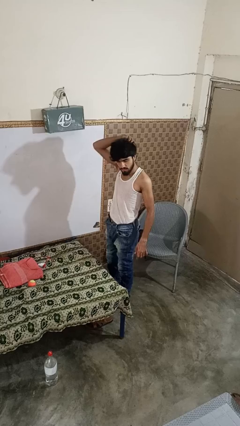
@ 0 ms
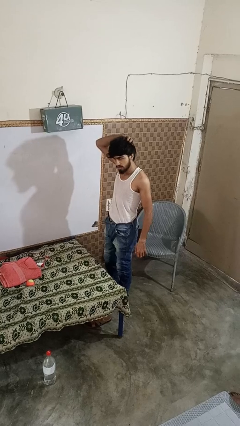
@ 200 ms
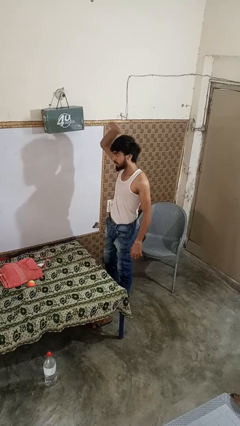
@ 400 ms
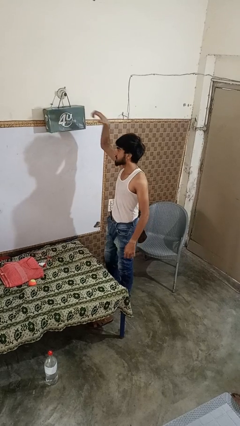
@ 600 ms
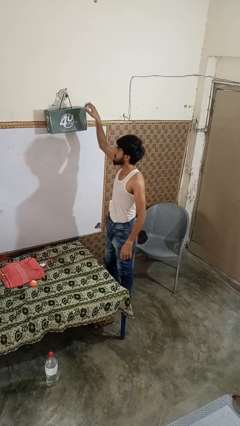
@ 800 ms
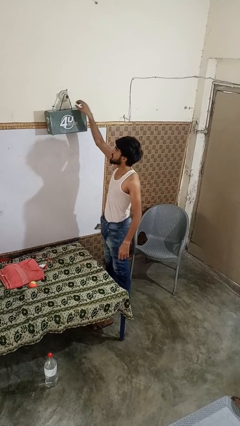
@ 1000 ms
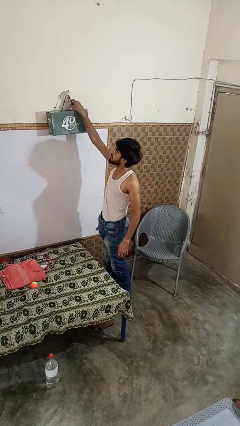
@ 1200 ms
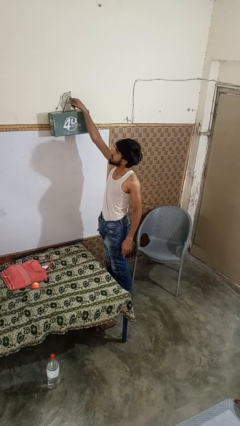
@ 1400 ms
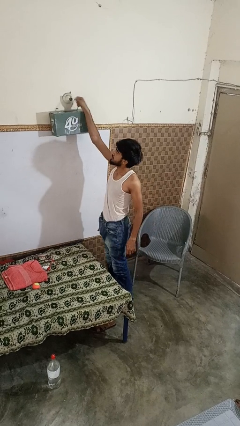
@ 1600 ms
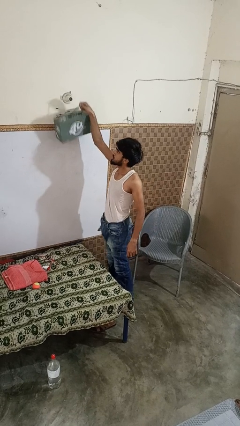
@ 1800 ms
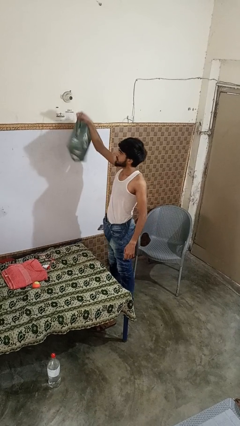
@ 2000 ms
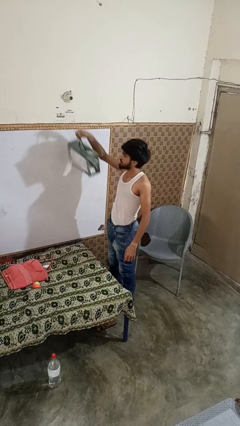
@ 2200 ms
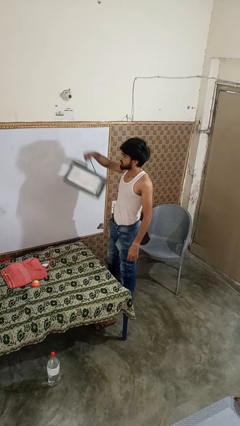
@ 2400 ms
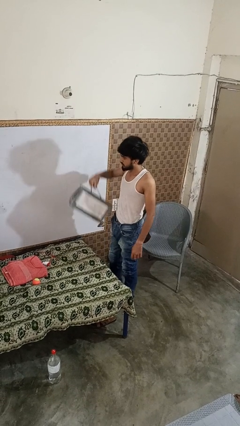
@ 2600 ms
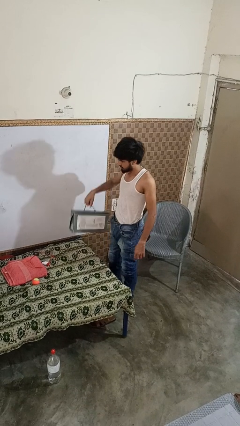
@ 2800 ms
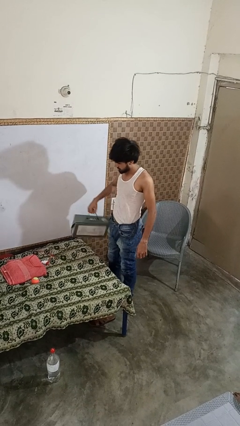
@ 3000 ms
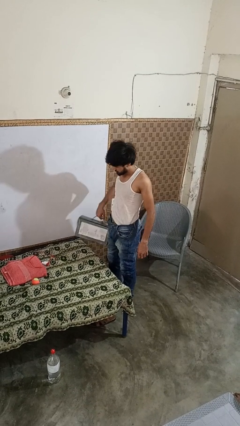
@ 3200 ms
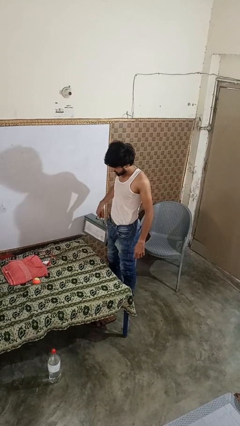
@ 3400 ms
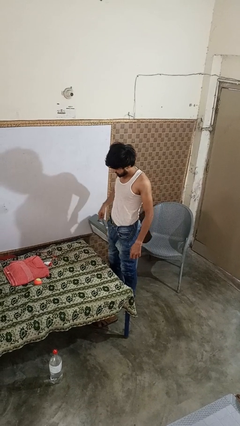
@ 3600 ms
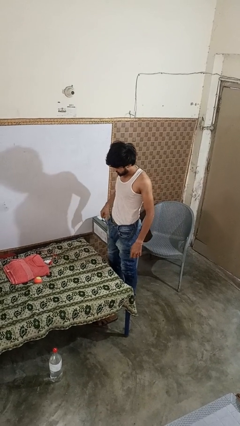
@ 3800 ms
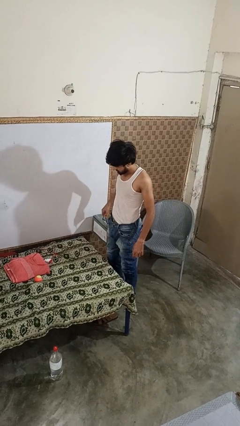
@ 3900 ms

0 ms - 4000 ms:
person takes down smoke detector

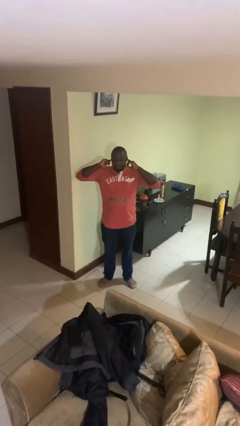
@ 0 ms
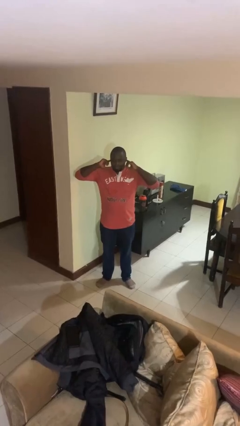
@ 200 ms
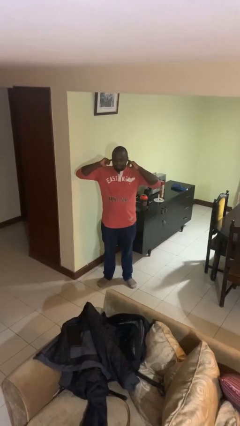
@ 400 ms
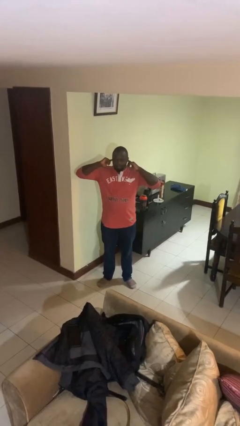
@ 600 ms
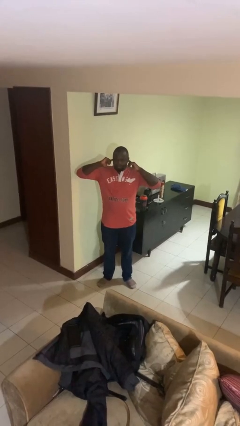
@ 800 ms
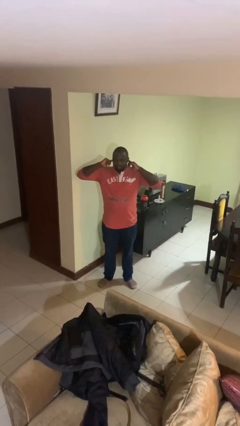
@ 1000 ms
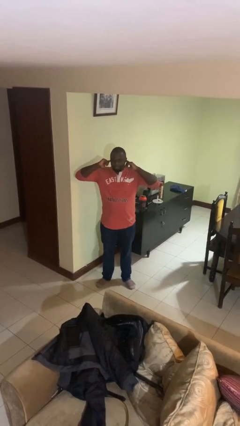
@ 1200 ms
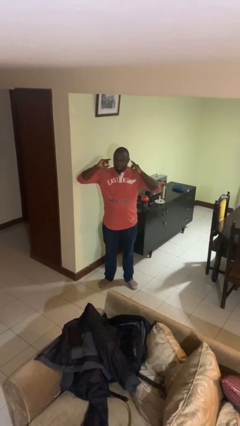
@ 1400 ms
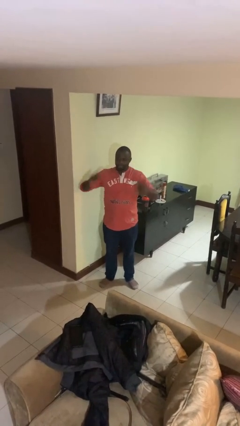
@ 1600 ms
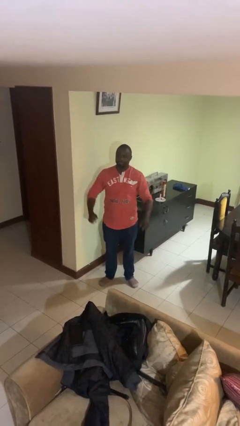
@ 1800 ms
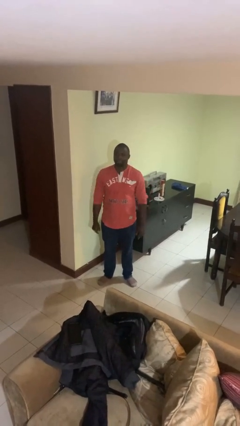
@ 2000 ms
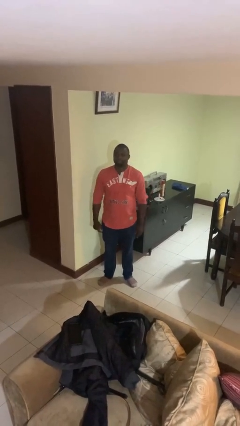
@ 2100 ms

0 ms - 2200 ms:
person puts fingers in ear

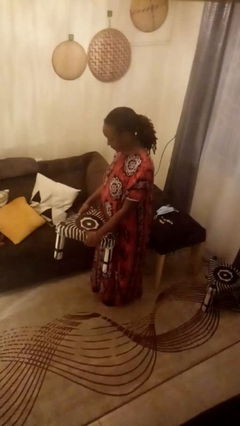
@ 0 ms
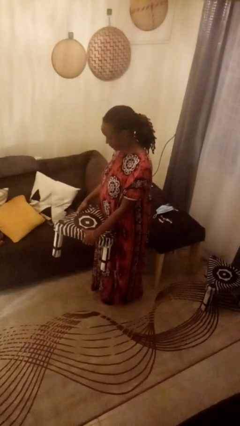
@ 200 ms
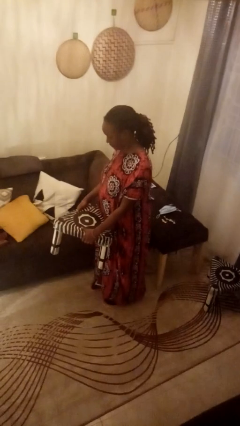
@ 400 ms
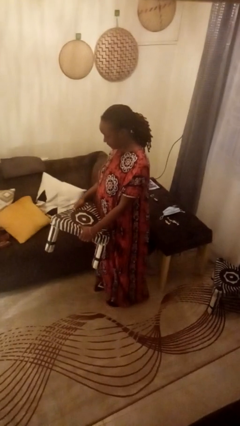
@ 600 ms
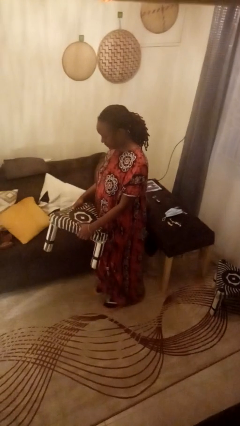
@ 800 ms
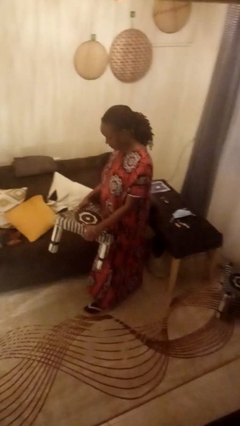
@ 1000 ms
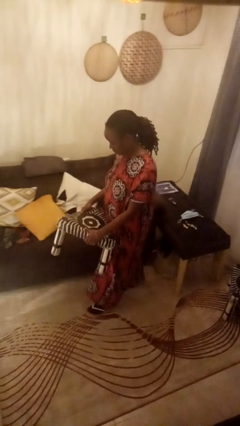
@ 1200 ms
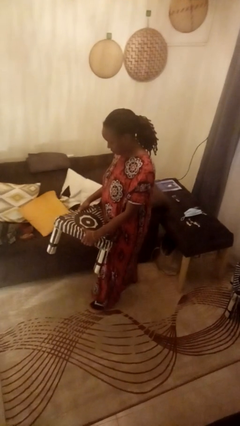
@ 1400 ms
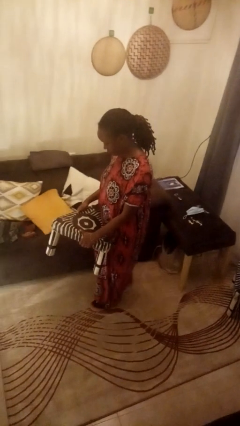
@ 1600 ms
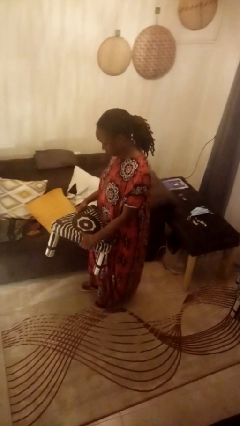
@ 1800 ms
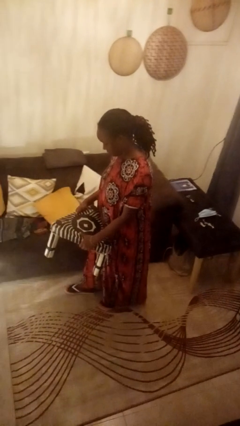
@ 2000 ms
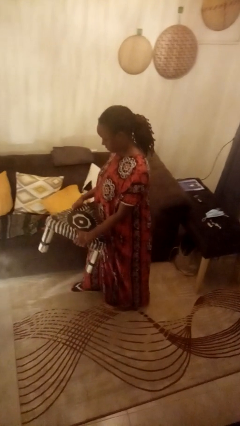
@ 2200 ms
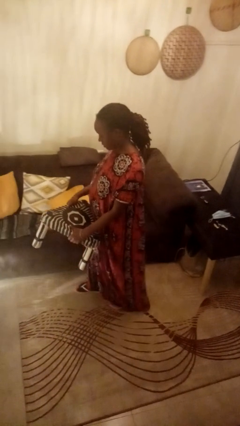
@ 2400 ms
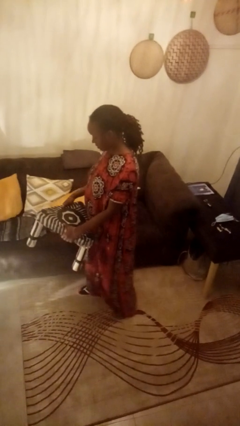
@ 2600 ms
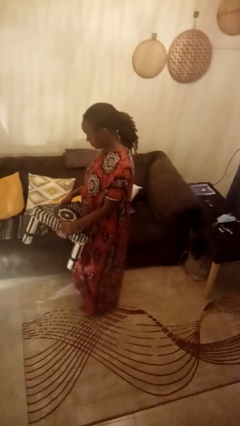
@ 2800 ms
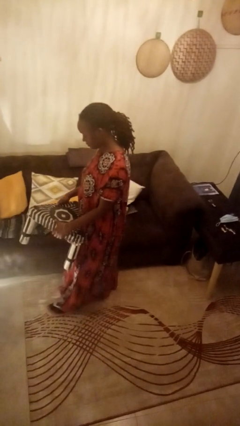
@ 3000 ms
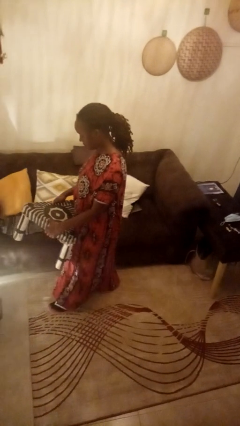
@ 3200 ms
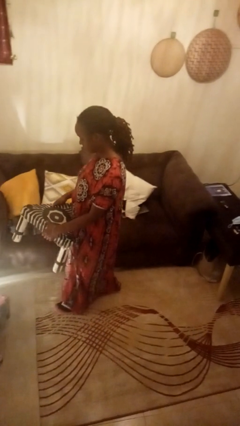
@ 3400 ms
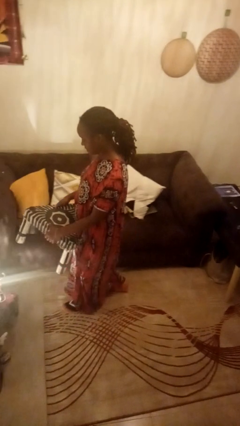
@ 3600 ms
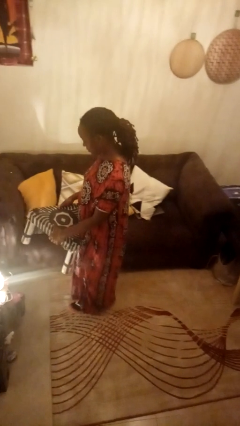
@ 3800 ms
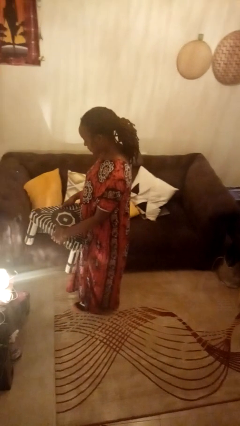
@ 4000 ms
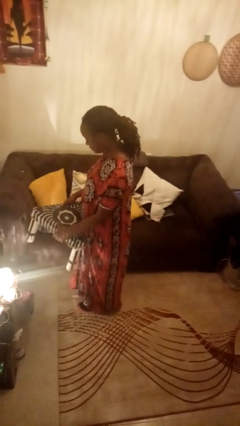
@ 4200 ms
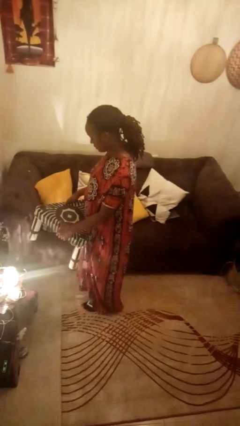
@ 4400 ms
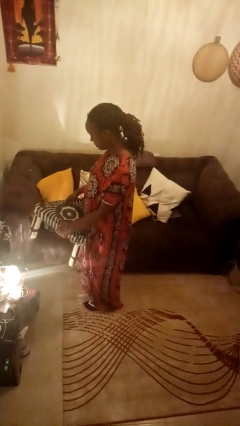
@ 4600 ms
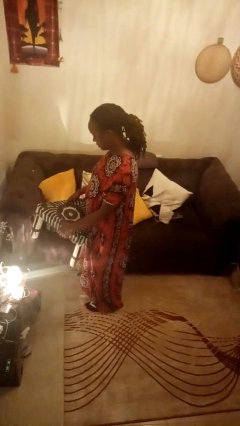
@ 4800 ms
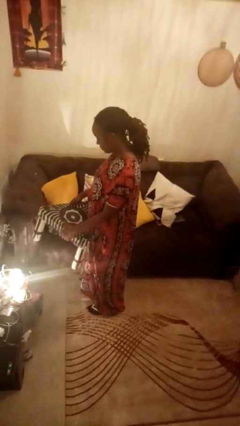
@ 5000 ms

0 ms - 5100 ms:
person carries furniture

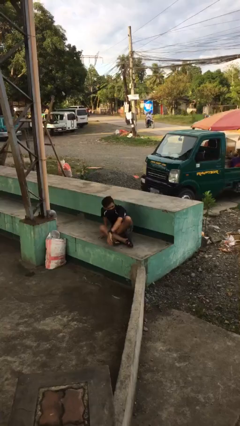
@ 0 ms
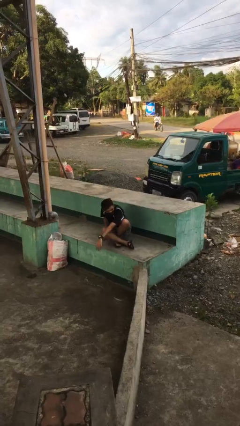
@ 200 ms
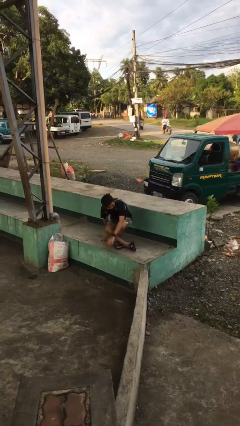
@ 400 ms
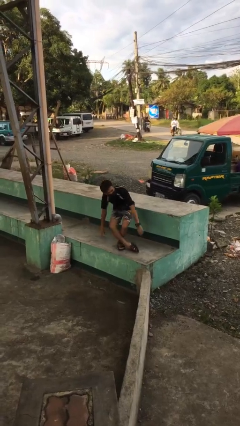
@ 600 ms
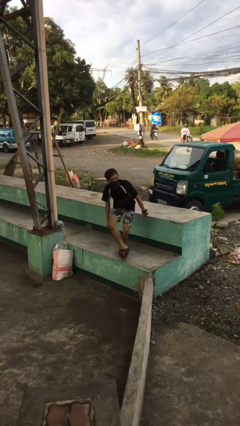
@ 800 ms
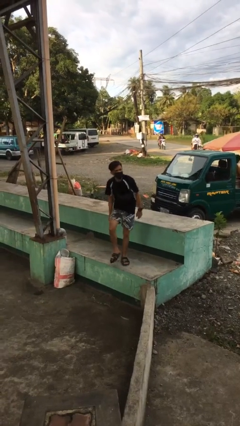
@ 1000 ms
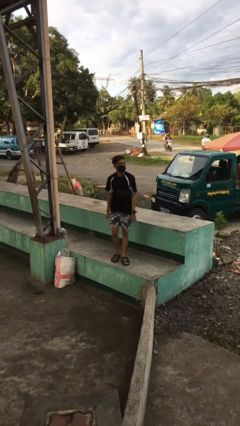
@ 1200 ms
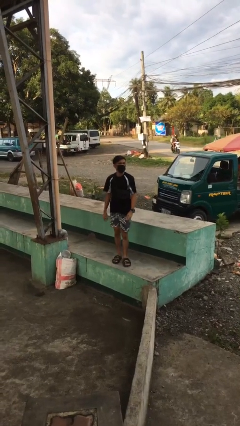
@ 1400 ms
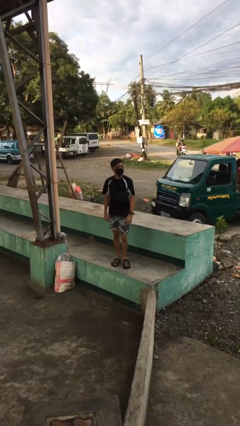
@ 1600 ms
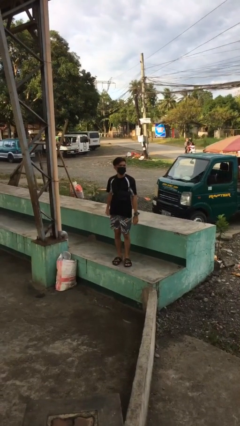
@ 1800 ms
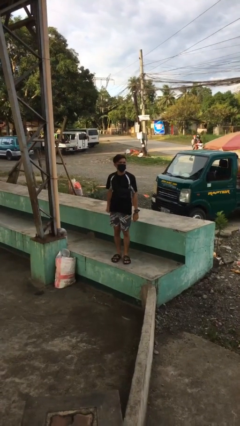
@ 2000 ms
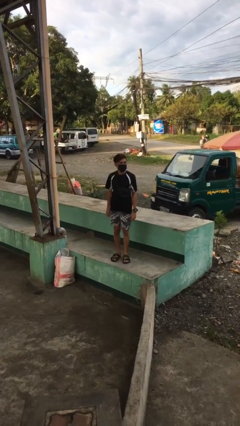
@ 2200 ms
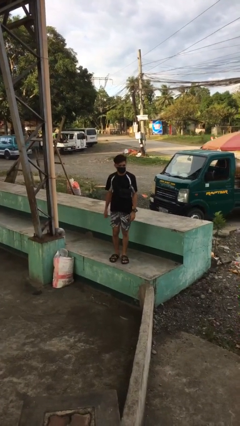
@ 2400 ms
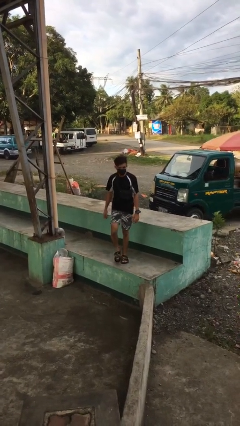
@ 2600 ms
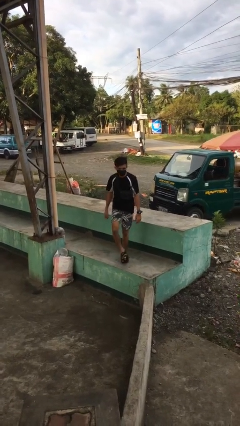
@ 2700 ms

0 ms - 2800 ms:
person stands up from floor

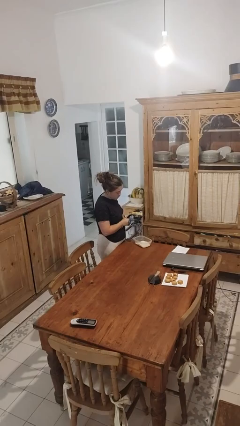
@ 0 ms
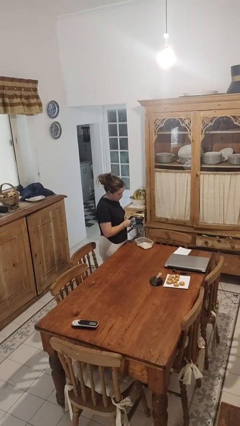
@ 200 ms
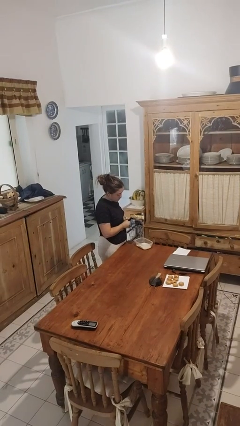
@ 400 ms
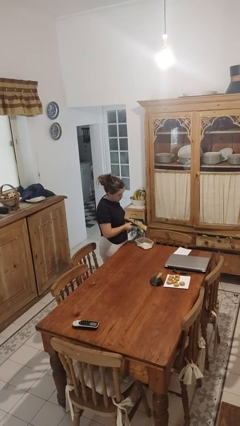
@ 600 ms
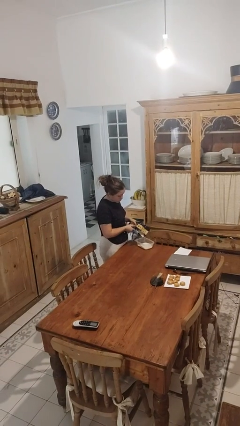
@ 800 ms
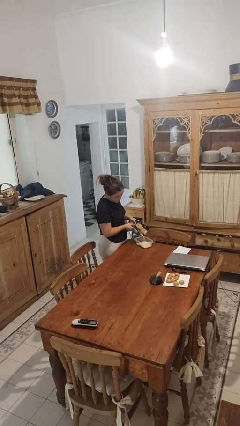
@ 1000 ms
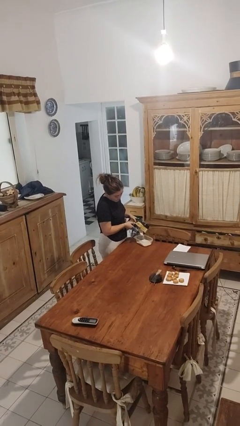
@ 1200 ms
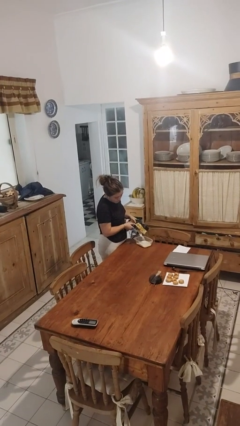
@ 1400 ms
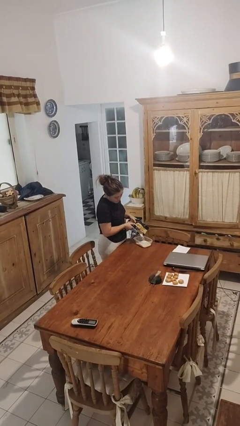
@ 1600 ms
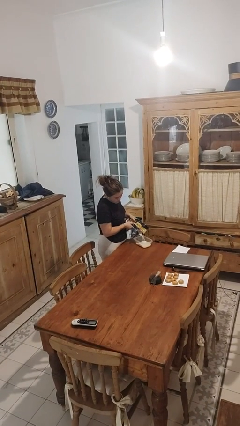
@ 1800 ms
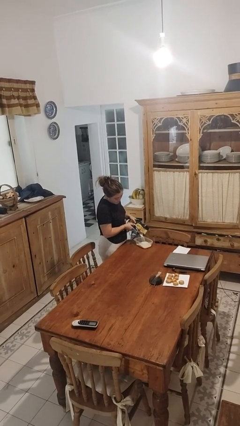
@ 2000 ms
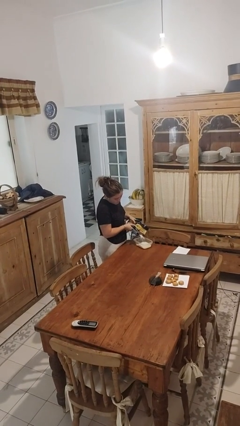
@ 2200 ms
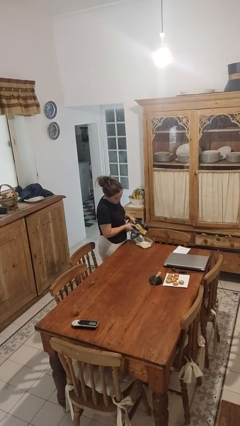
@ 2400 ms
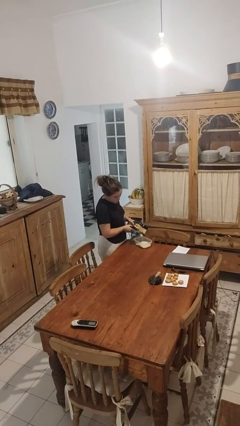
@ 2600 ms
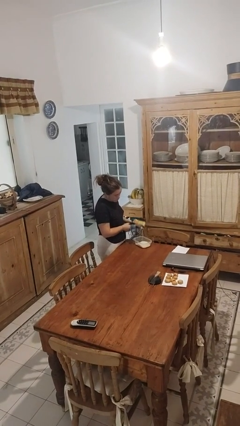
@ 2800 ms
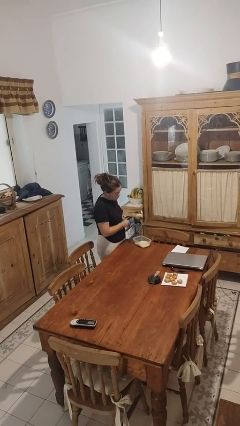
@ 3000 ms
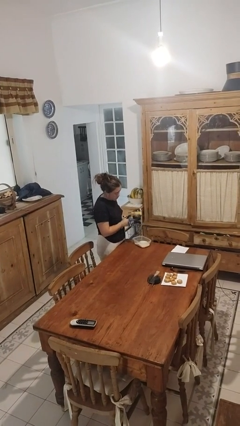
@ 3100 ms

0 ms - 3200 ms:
person pours into bowl

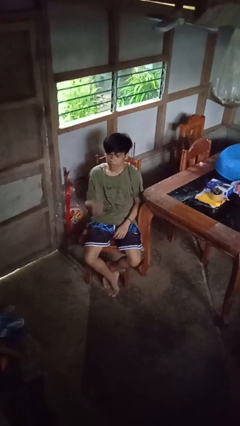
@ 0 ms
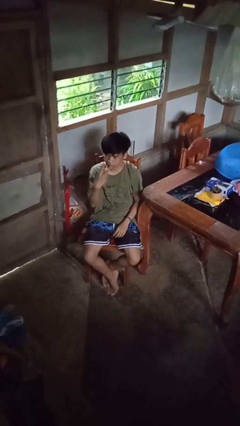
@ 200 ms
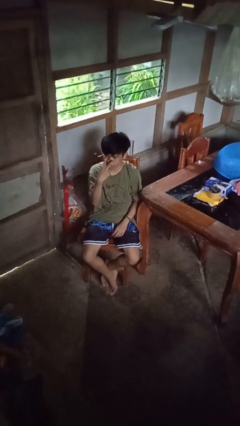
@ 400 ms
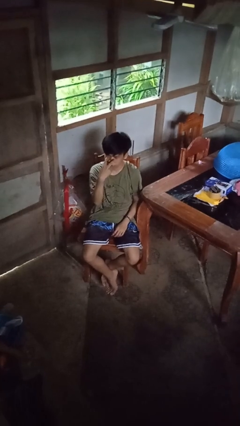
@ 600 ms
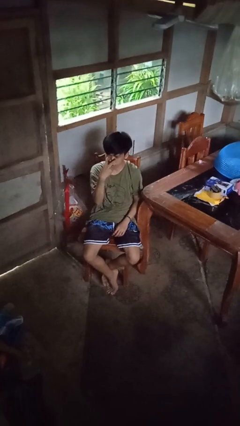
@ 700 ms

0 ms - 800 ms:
person gestures watch closely
